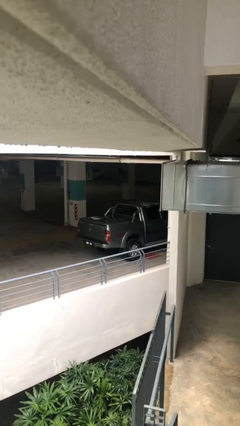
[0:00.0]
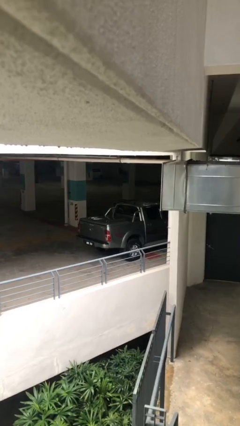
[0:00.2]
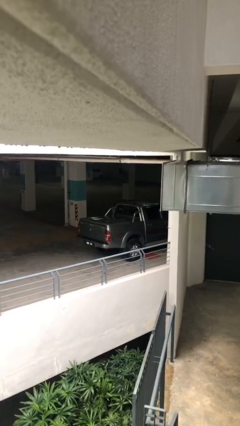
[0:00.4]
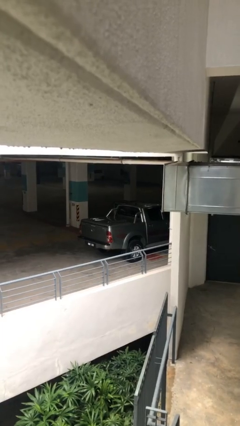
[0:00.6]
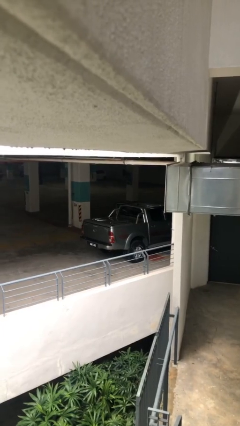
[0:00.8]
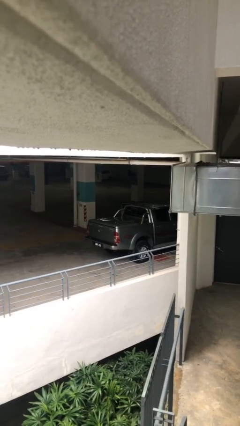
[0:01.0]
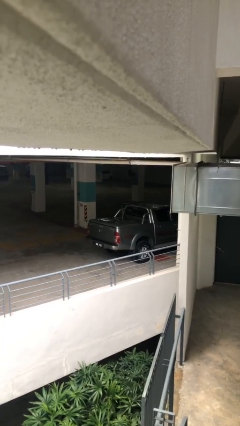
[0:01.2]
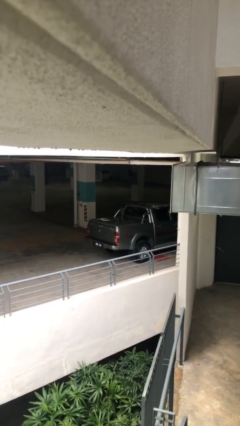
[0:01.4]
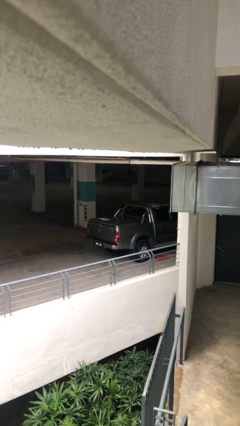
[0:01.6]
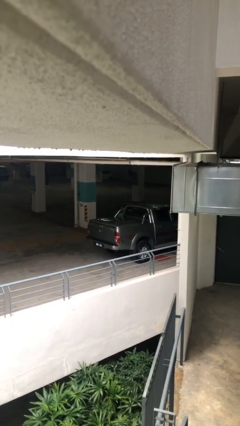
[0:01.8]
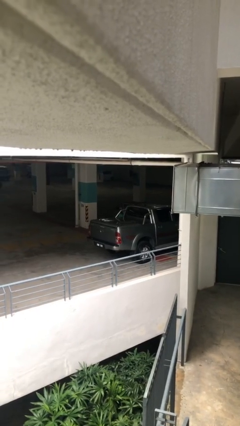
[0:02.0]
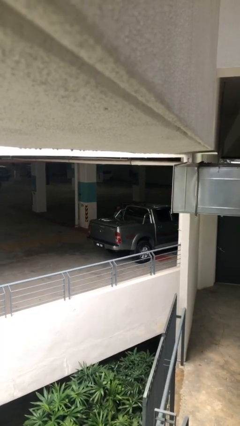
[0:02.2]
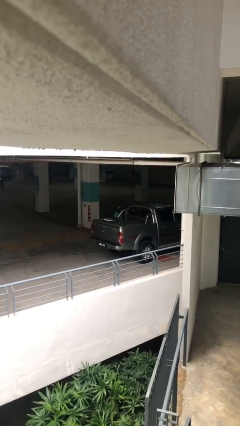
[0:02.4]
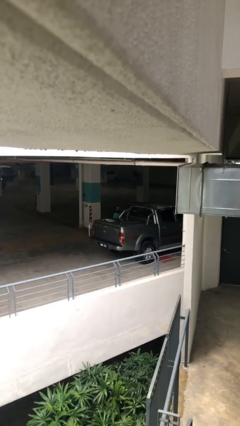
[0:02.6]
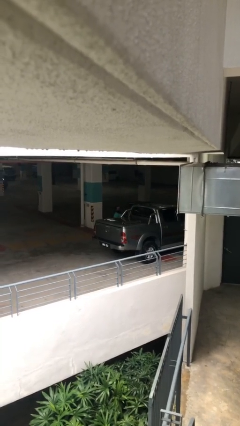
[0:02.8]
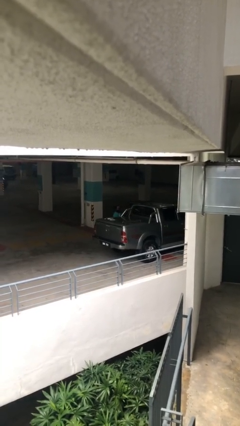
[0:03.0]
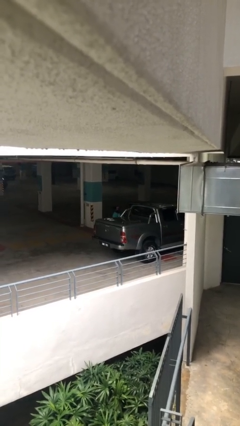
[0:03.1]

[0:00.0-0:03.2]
person exits car

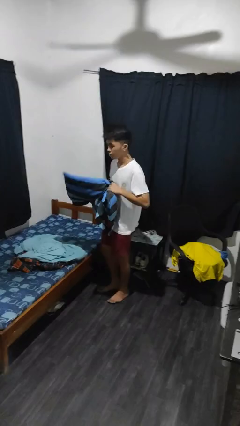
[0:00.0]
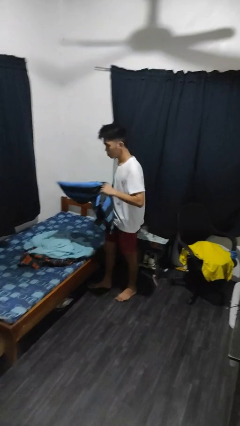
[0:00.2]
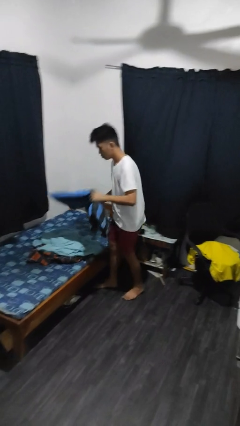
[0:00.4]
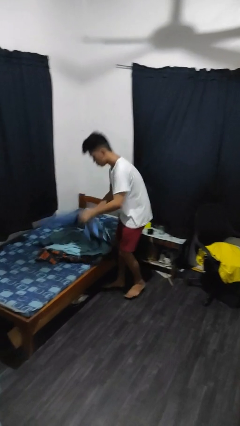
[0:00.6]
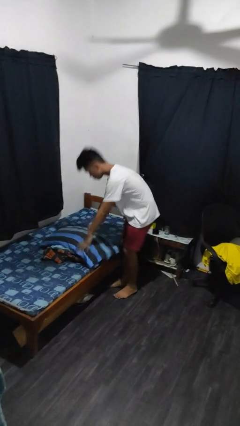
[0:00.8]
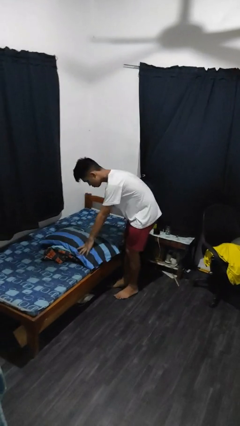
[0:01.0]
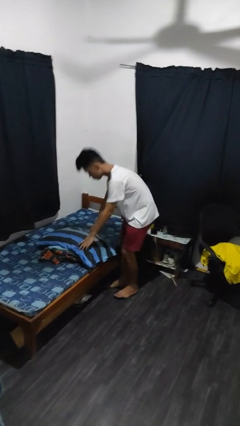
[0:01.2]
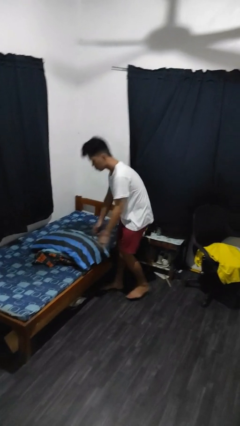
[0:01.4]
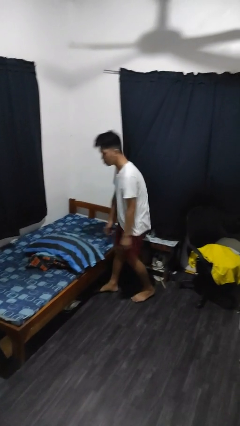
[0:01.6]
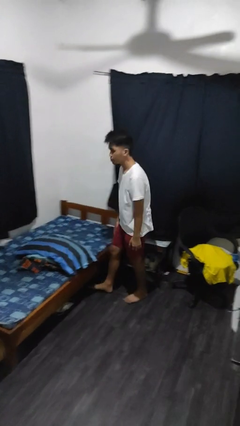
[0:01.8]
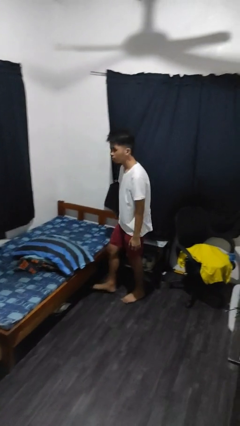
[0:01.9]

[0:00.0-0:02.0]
person puts down object on bed

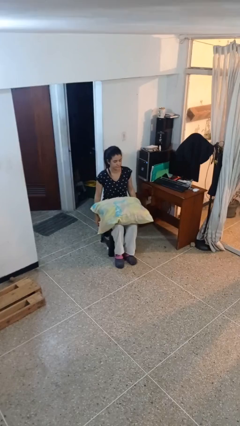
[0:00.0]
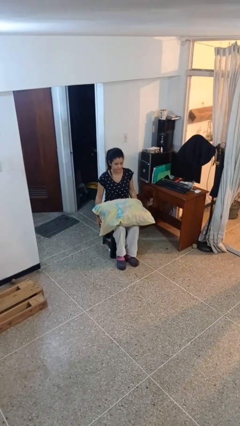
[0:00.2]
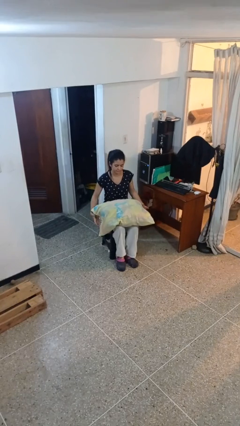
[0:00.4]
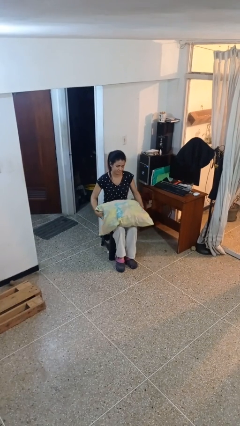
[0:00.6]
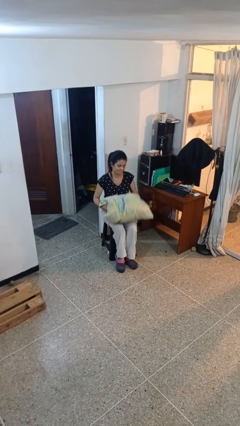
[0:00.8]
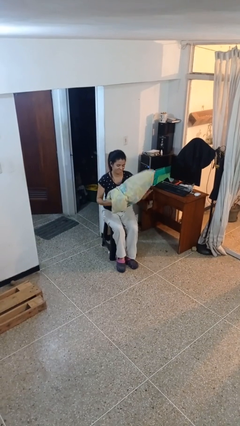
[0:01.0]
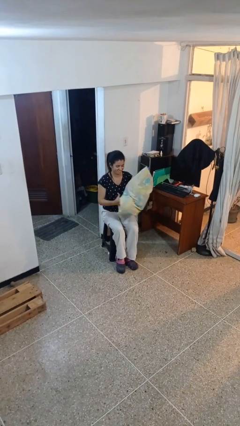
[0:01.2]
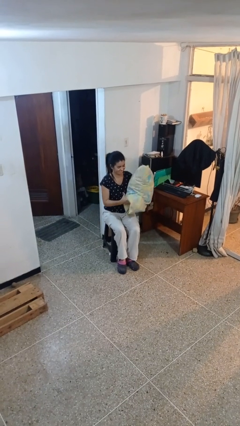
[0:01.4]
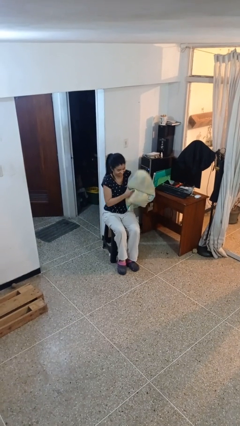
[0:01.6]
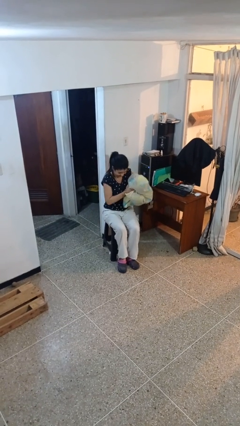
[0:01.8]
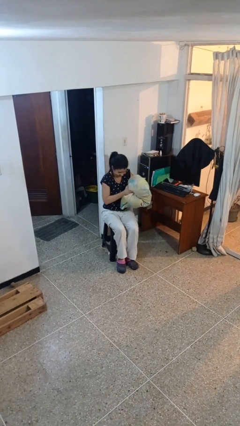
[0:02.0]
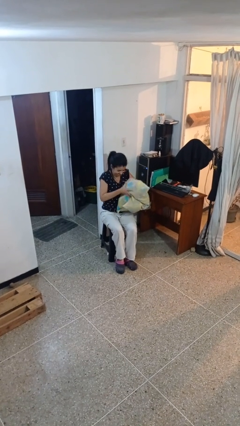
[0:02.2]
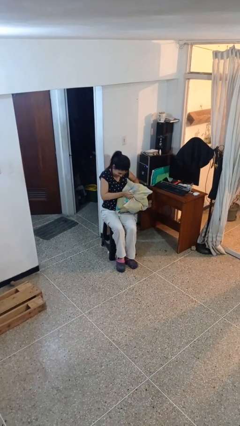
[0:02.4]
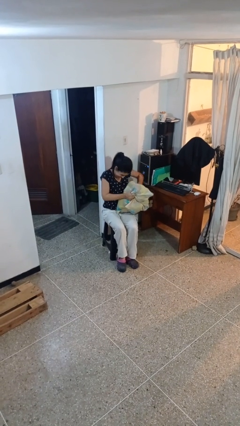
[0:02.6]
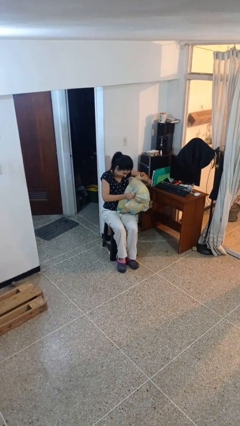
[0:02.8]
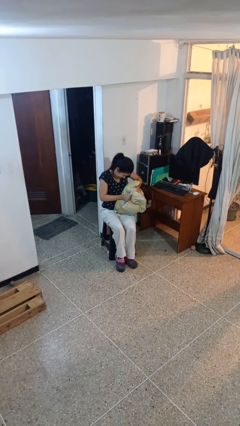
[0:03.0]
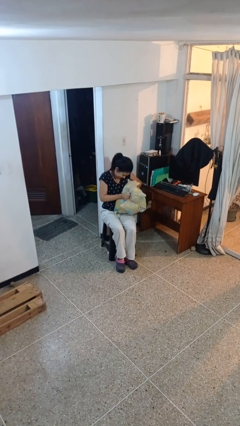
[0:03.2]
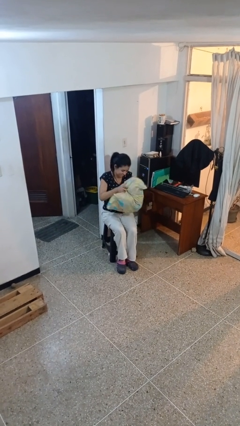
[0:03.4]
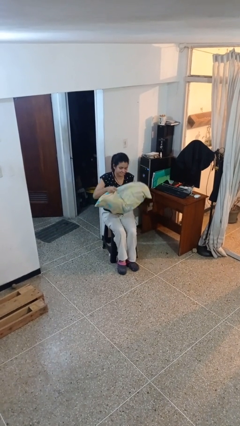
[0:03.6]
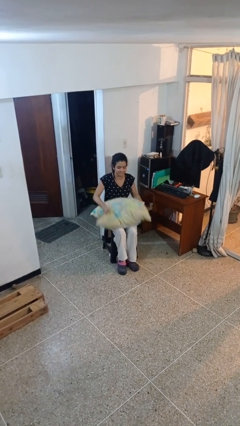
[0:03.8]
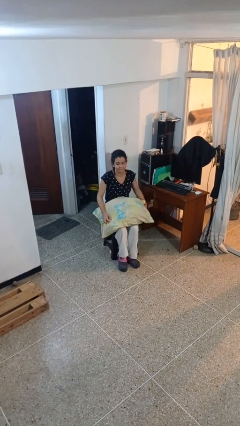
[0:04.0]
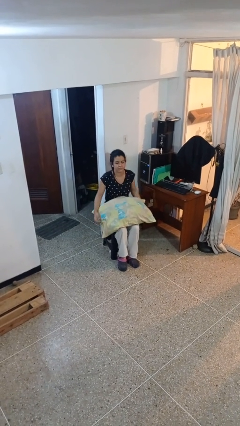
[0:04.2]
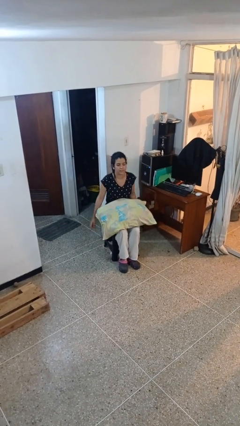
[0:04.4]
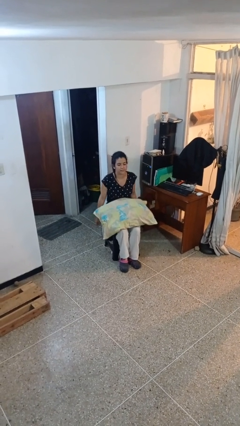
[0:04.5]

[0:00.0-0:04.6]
person squeezes object

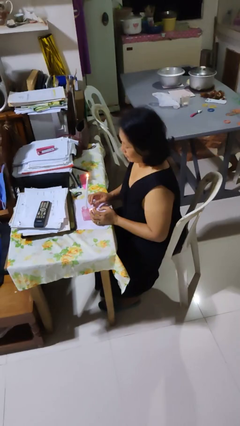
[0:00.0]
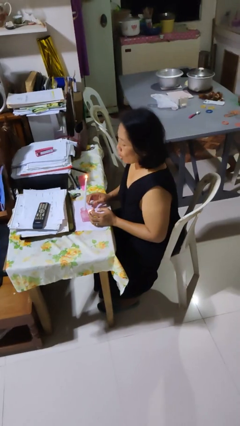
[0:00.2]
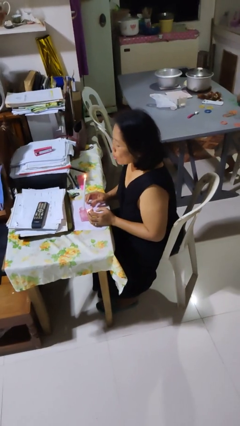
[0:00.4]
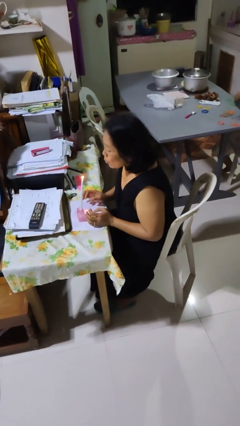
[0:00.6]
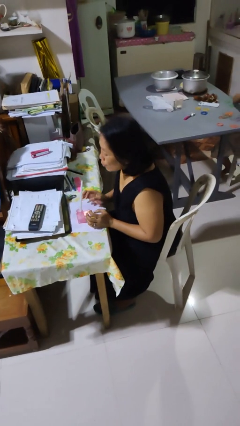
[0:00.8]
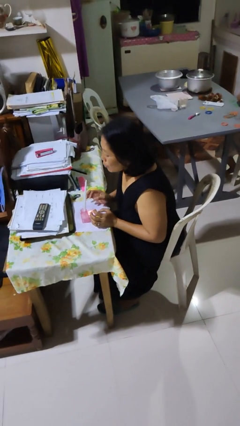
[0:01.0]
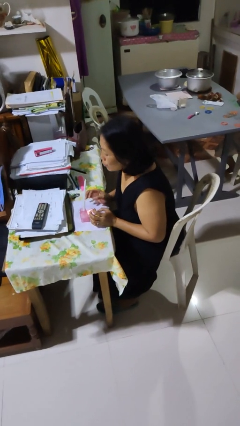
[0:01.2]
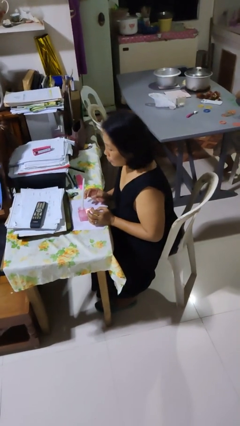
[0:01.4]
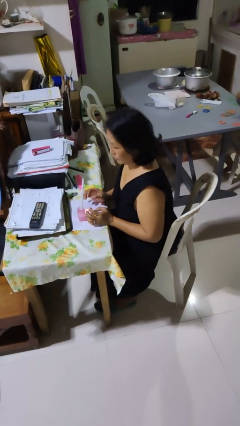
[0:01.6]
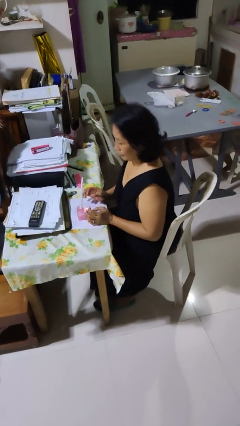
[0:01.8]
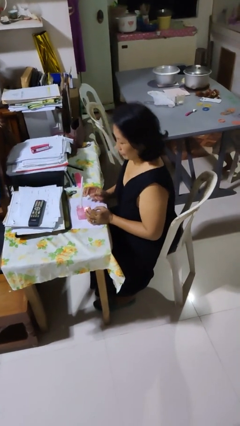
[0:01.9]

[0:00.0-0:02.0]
person extinguishes candle

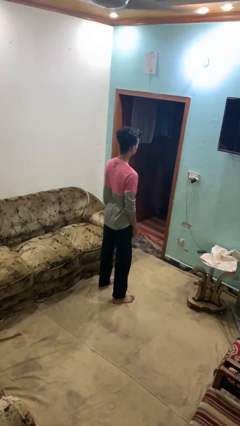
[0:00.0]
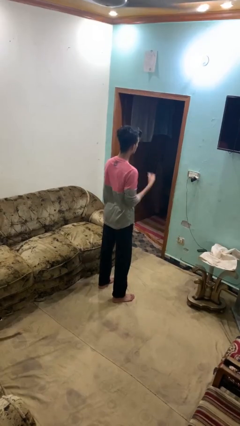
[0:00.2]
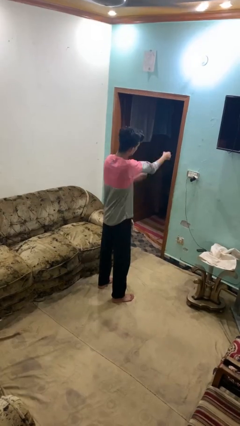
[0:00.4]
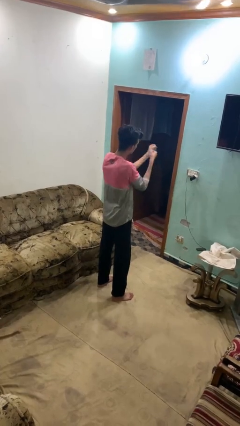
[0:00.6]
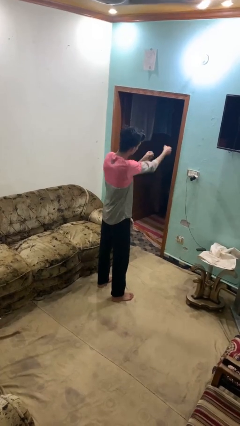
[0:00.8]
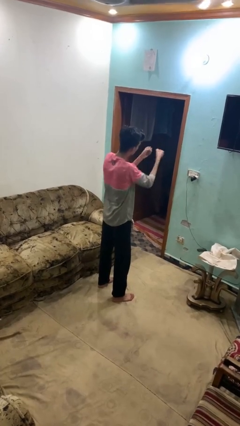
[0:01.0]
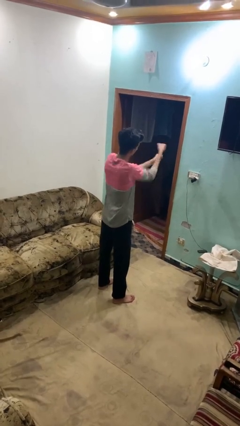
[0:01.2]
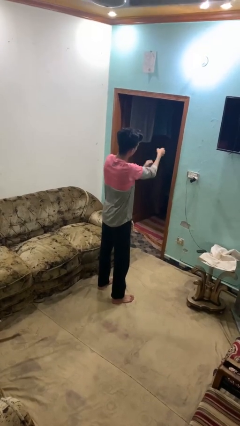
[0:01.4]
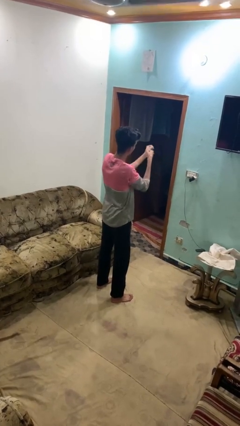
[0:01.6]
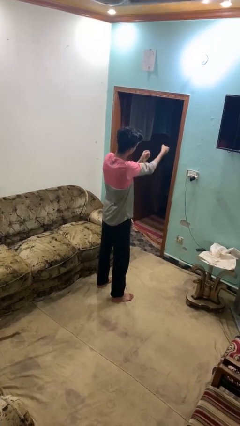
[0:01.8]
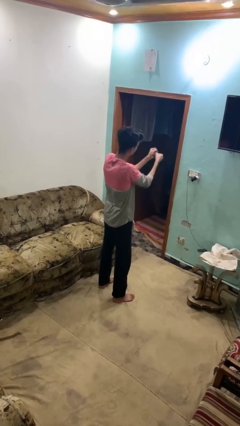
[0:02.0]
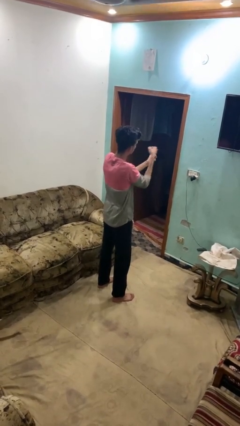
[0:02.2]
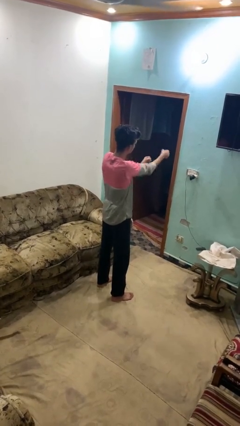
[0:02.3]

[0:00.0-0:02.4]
person punches

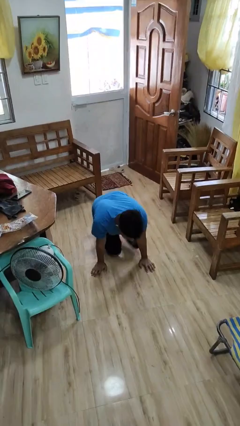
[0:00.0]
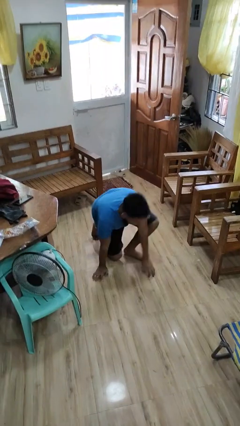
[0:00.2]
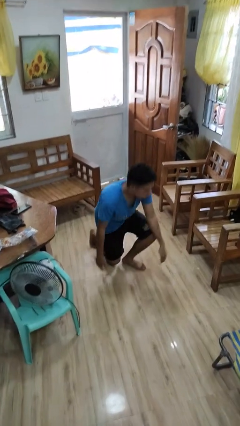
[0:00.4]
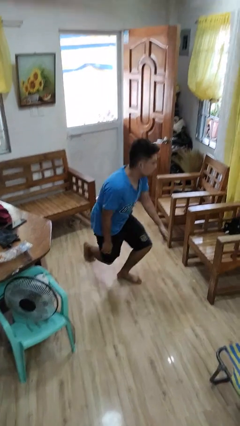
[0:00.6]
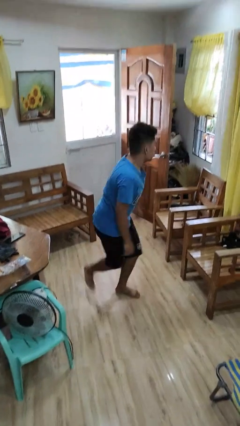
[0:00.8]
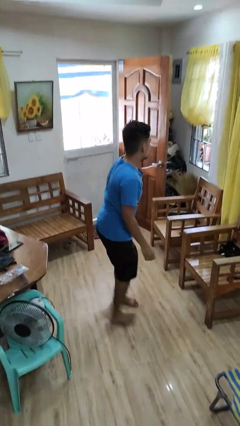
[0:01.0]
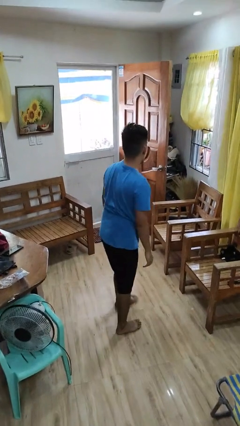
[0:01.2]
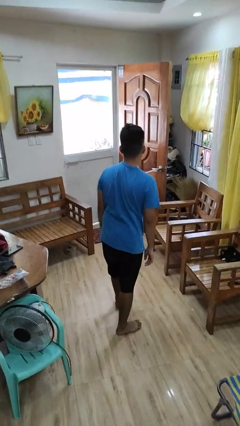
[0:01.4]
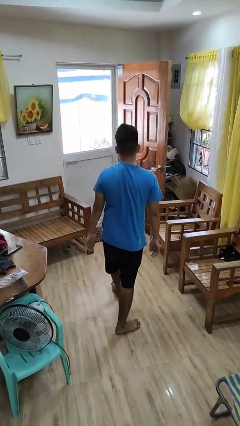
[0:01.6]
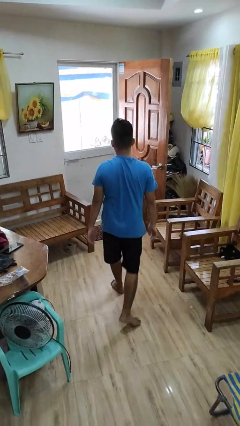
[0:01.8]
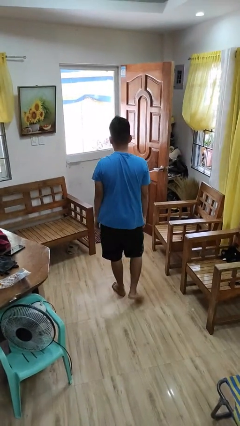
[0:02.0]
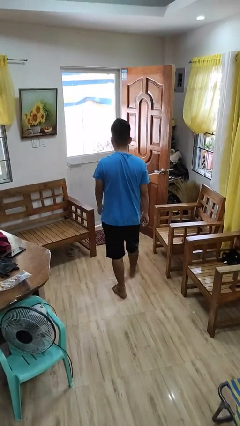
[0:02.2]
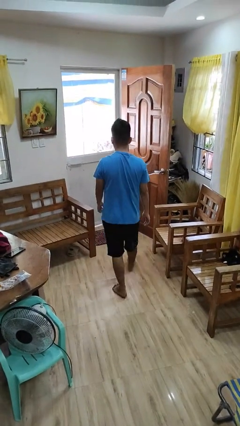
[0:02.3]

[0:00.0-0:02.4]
person stands up from floor

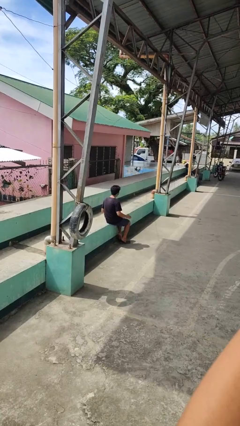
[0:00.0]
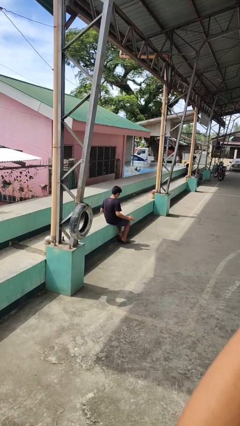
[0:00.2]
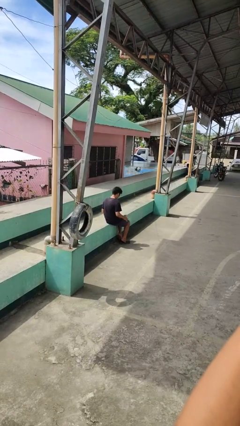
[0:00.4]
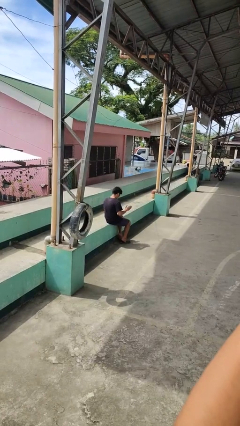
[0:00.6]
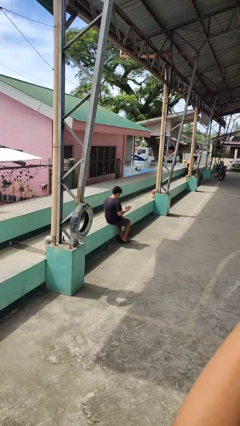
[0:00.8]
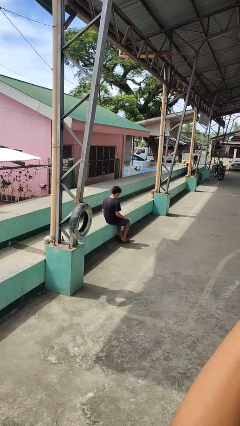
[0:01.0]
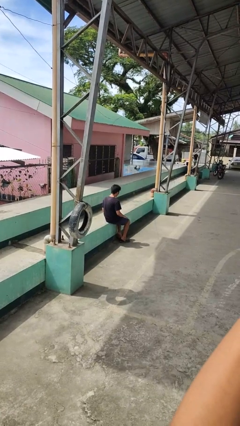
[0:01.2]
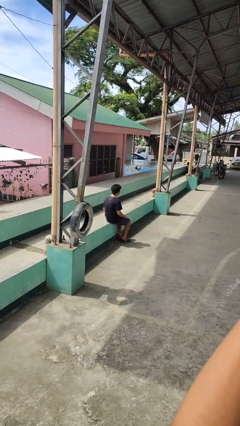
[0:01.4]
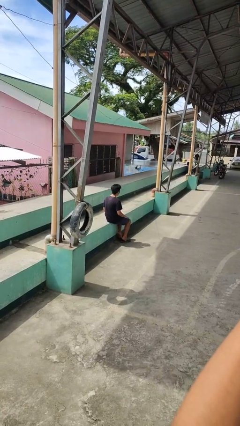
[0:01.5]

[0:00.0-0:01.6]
person slaps hands on thighs
